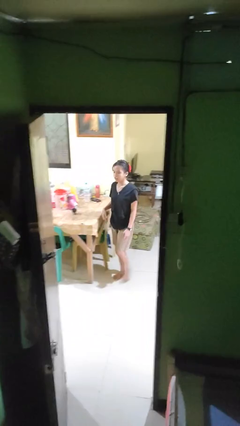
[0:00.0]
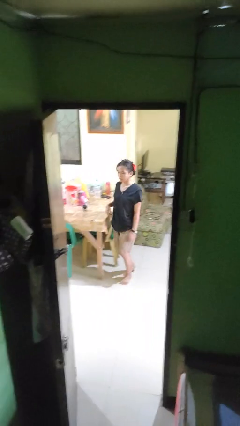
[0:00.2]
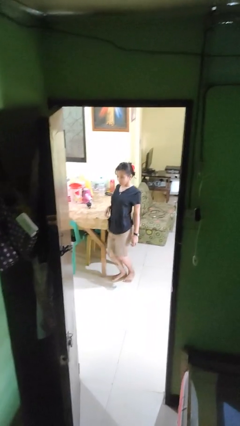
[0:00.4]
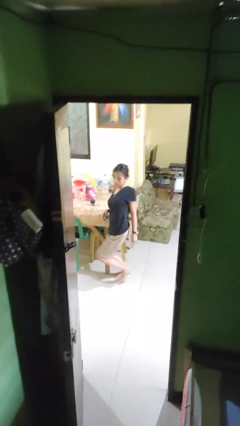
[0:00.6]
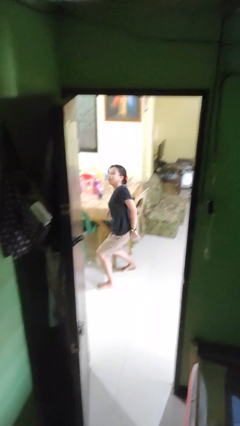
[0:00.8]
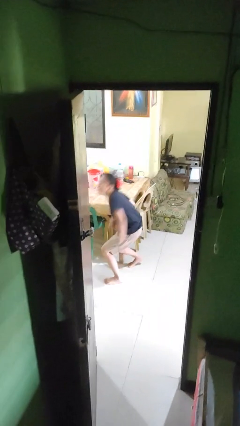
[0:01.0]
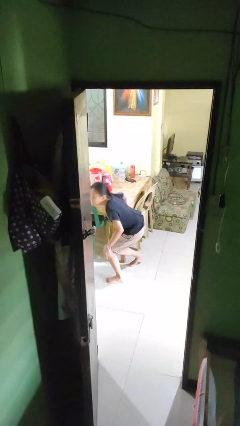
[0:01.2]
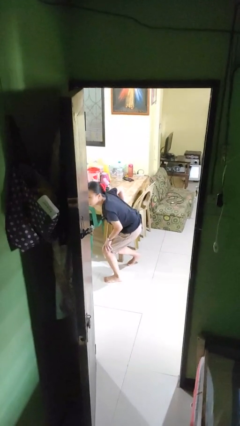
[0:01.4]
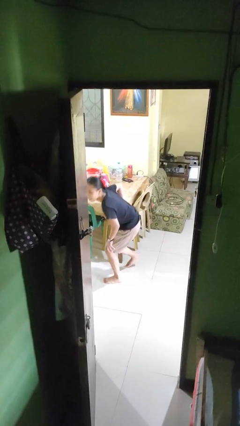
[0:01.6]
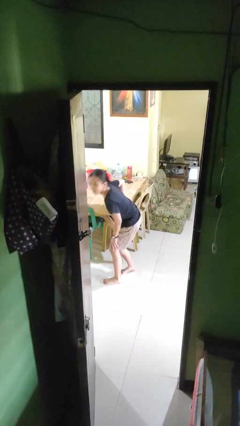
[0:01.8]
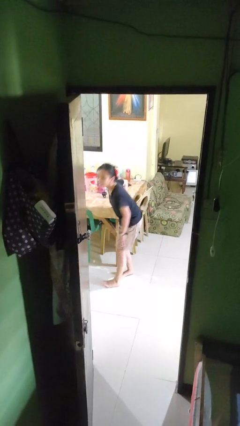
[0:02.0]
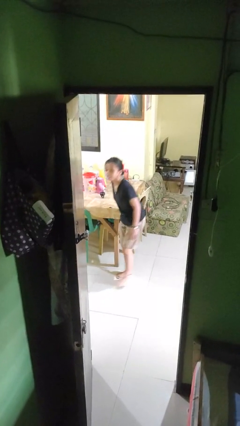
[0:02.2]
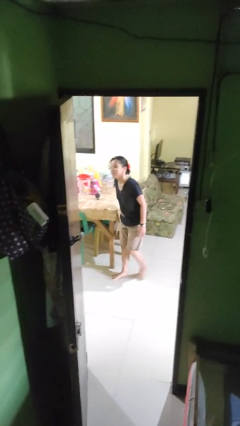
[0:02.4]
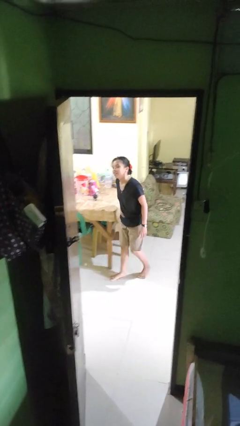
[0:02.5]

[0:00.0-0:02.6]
person bumps into table

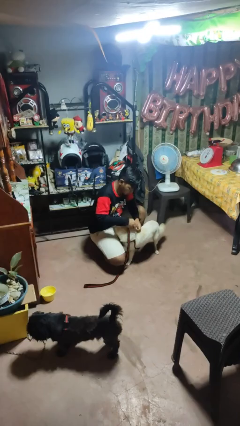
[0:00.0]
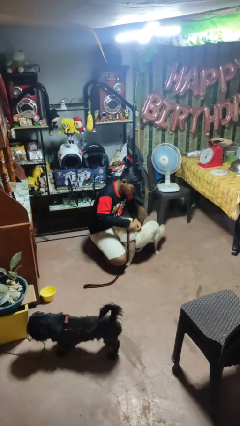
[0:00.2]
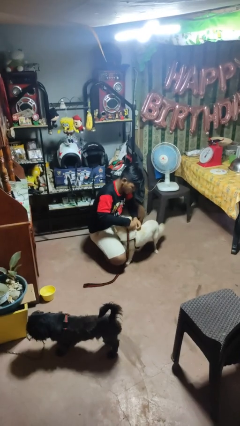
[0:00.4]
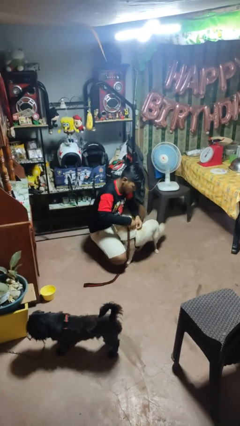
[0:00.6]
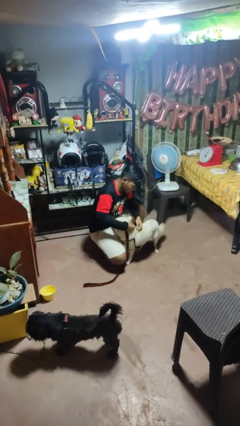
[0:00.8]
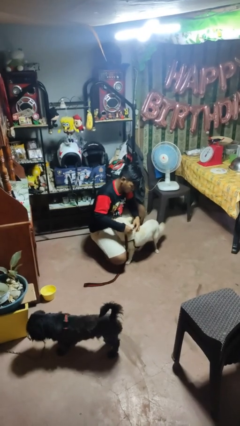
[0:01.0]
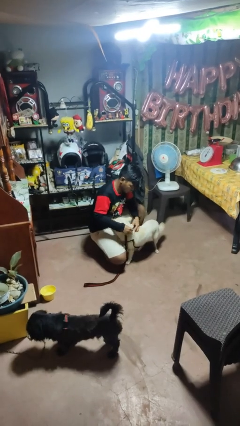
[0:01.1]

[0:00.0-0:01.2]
person attaches leash to dog

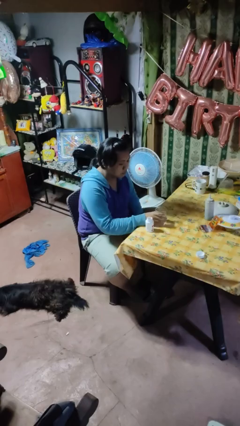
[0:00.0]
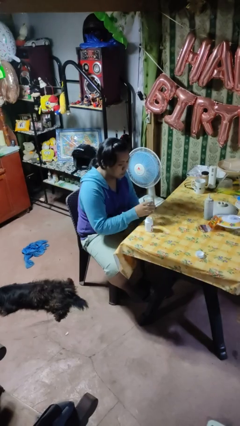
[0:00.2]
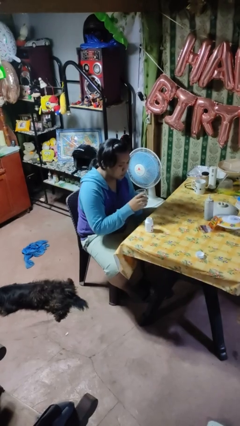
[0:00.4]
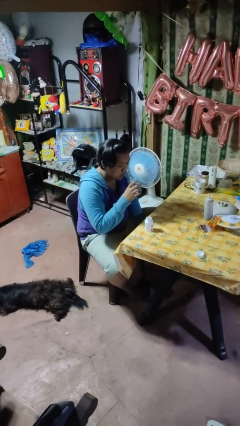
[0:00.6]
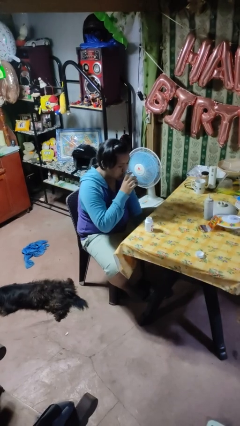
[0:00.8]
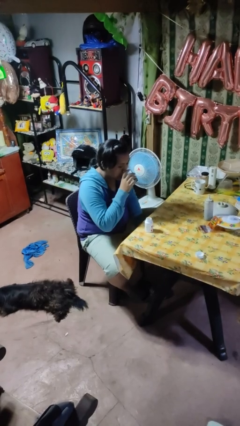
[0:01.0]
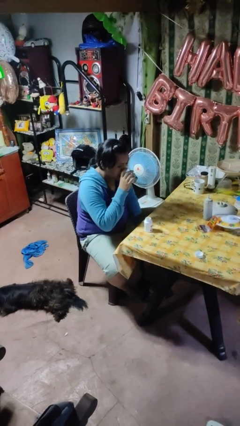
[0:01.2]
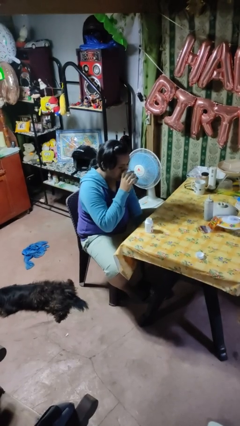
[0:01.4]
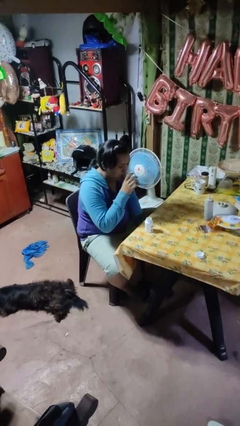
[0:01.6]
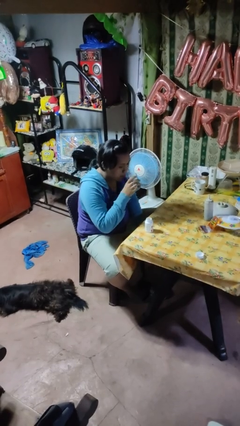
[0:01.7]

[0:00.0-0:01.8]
person drinks from cup

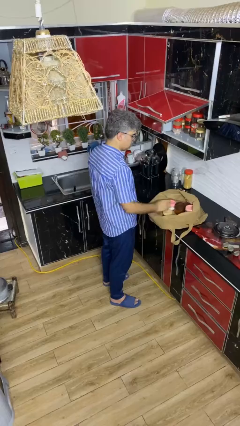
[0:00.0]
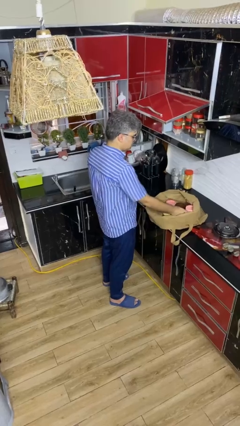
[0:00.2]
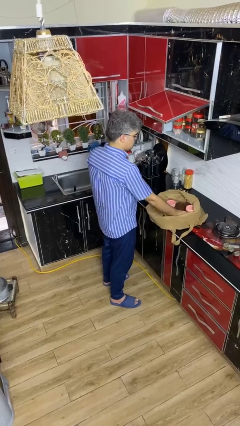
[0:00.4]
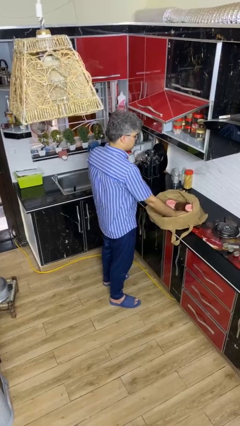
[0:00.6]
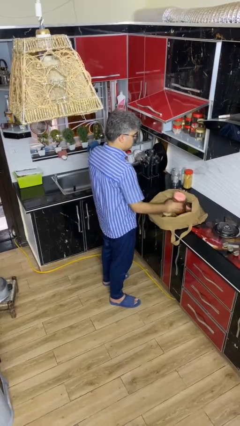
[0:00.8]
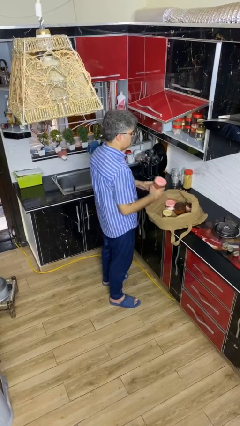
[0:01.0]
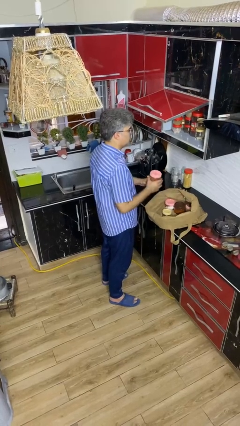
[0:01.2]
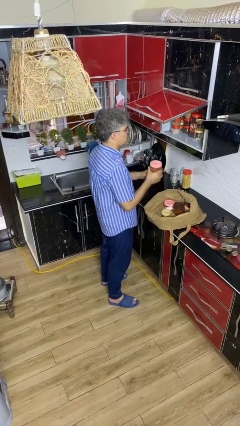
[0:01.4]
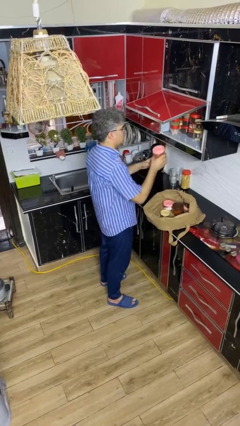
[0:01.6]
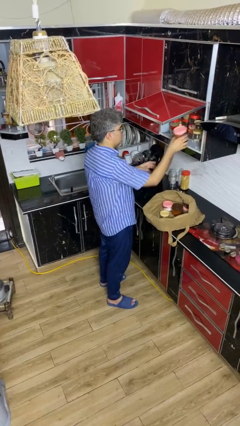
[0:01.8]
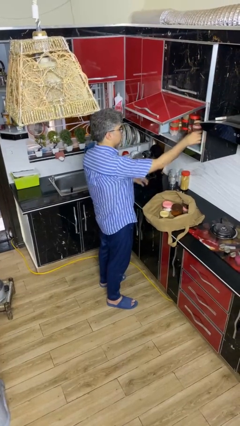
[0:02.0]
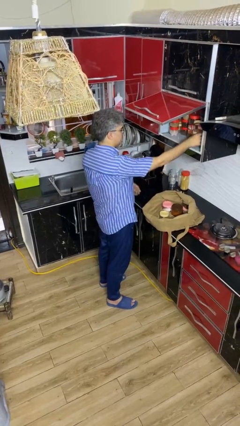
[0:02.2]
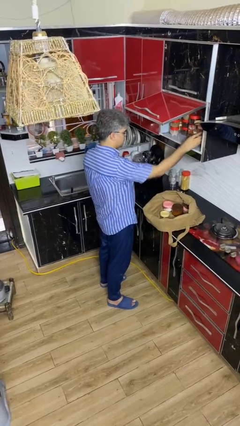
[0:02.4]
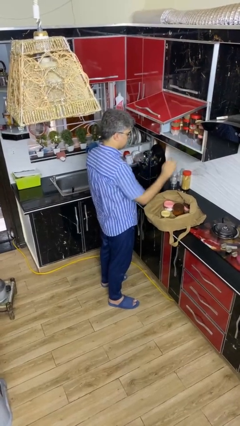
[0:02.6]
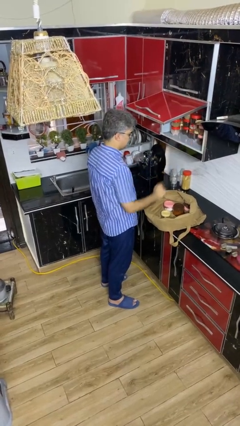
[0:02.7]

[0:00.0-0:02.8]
person loads groceries into cabinet

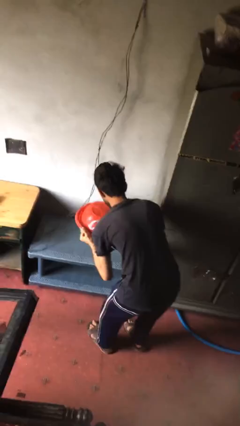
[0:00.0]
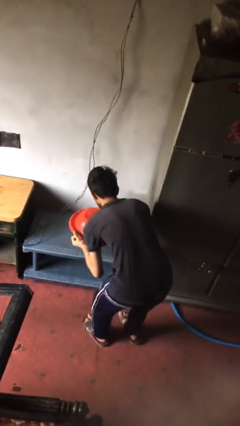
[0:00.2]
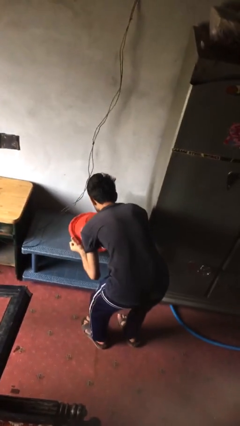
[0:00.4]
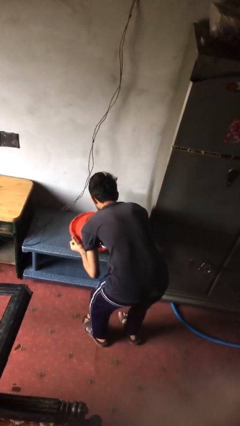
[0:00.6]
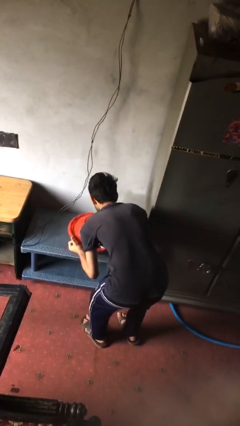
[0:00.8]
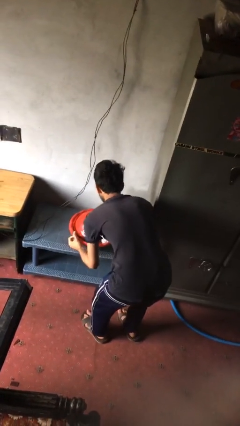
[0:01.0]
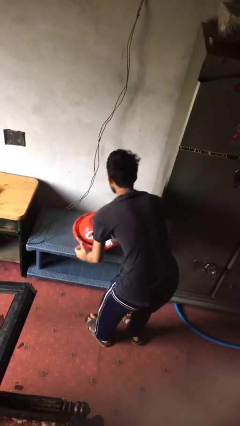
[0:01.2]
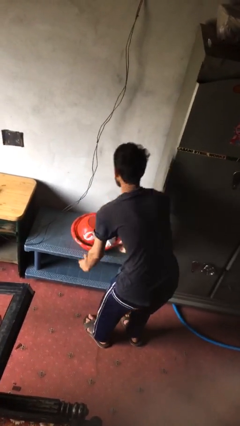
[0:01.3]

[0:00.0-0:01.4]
person puts down object on table

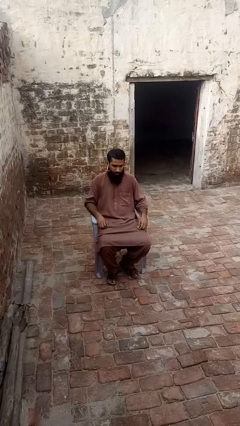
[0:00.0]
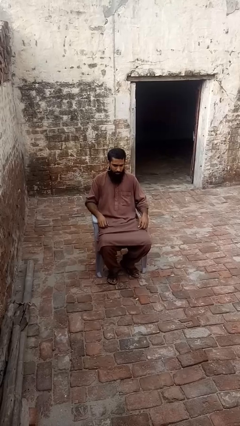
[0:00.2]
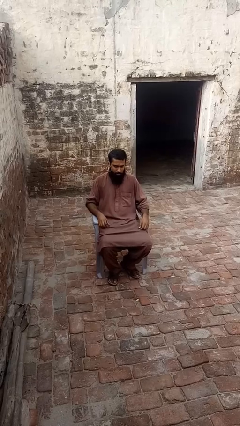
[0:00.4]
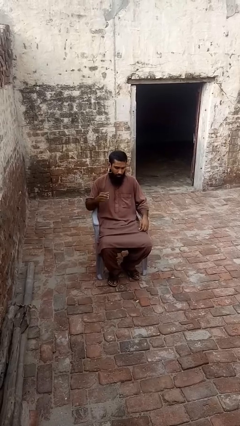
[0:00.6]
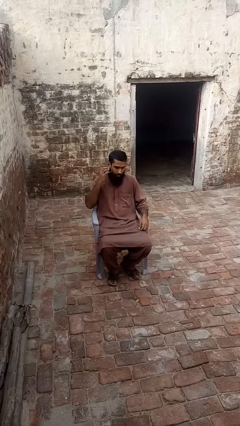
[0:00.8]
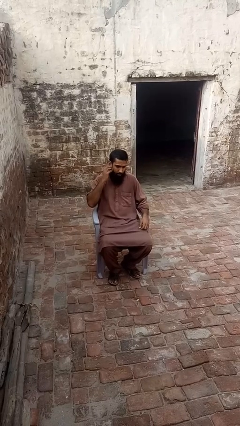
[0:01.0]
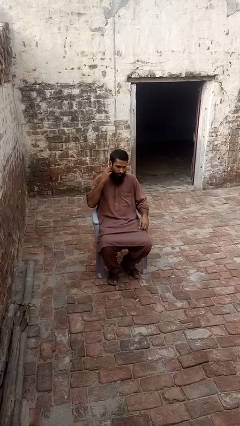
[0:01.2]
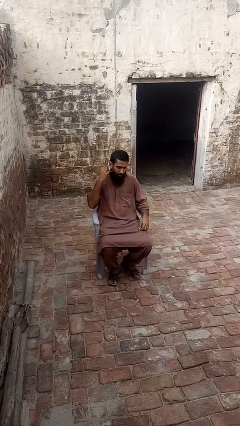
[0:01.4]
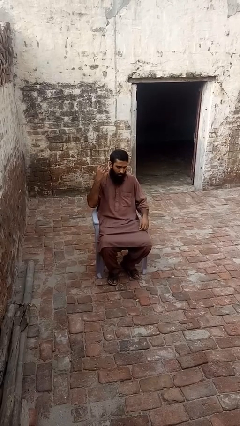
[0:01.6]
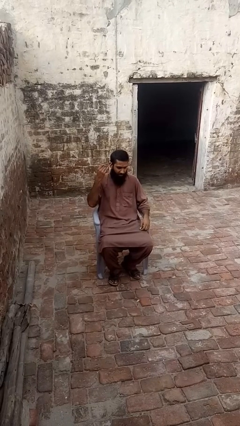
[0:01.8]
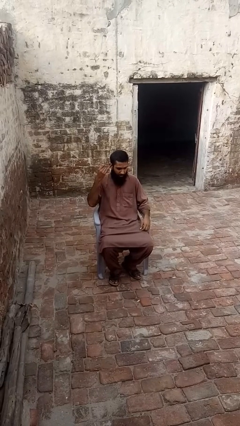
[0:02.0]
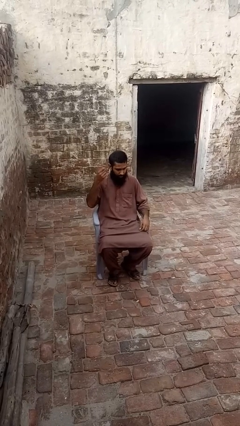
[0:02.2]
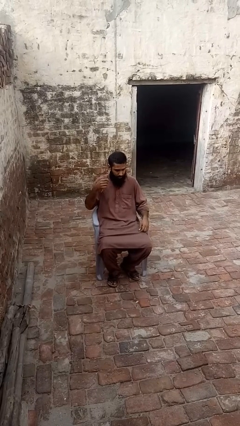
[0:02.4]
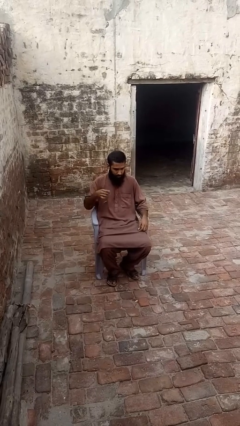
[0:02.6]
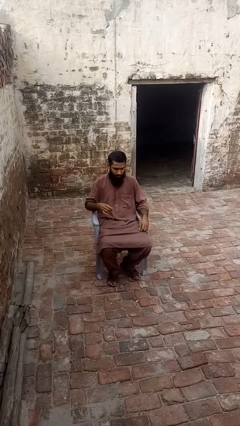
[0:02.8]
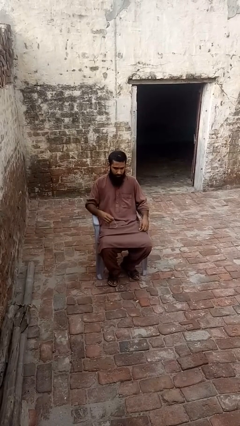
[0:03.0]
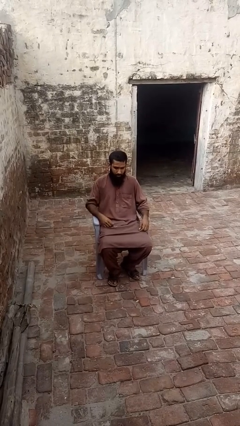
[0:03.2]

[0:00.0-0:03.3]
person takes off earrings

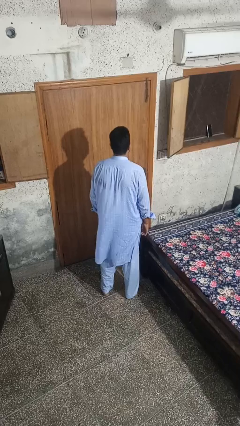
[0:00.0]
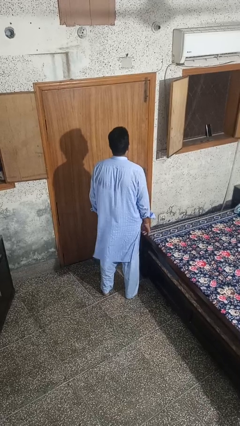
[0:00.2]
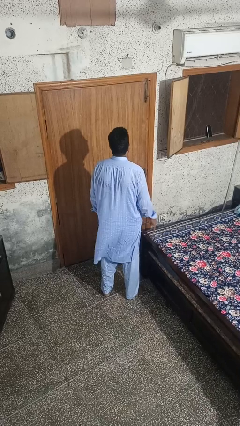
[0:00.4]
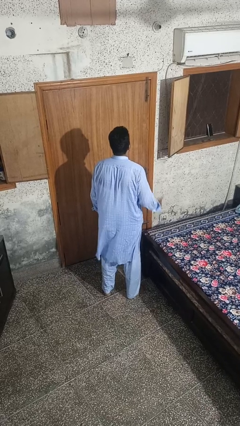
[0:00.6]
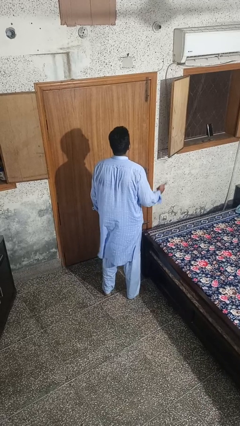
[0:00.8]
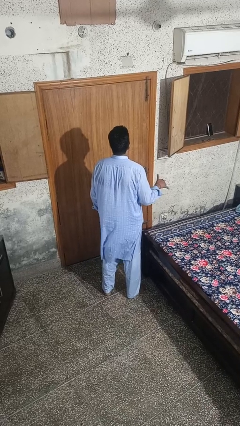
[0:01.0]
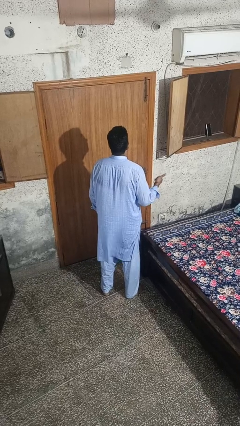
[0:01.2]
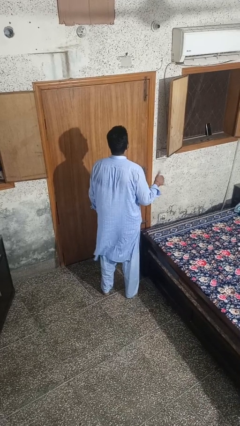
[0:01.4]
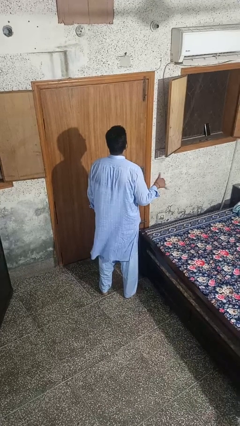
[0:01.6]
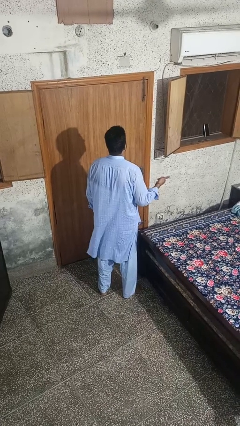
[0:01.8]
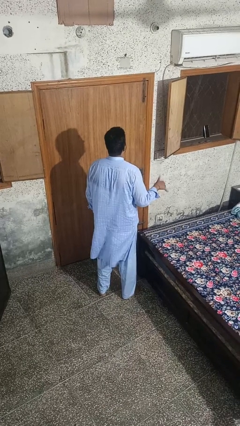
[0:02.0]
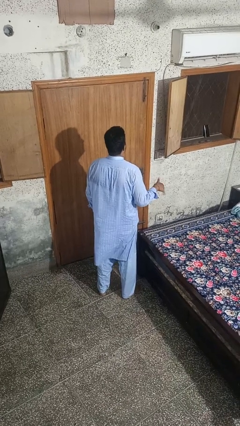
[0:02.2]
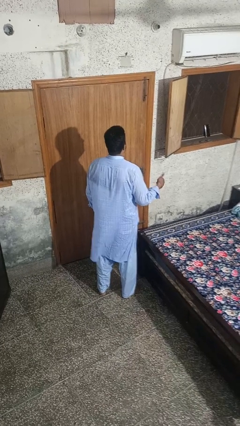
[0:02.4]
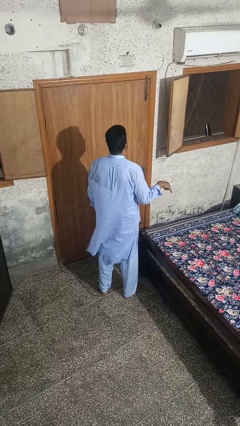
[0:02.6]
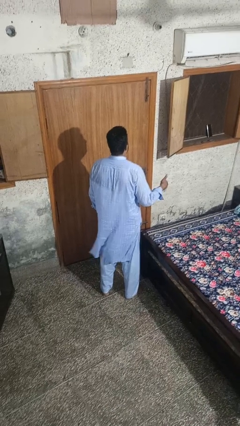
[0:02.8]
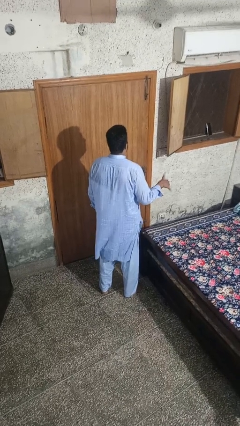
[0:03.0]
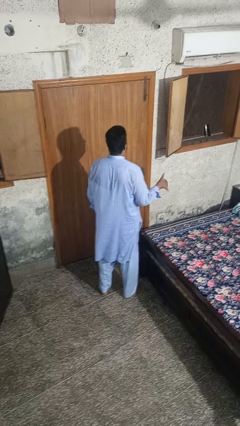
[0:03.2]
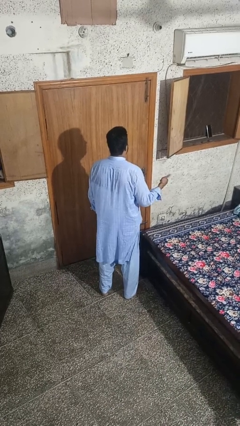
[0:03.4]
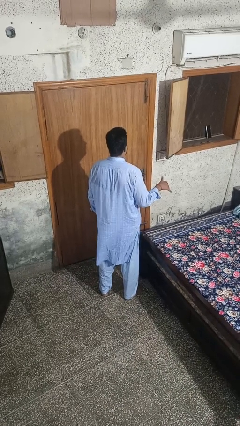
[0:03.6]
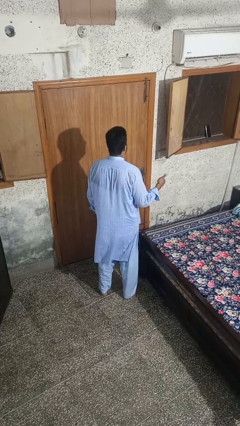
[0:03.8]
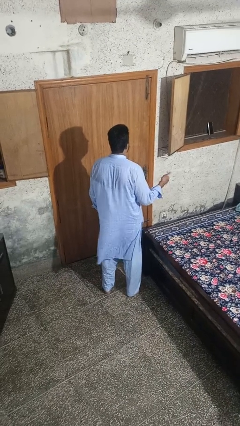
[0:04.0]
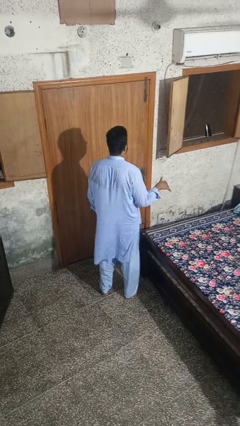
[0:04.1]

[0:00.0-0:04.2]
person gestures hang loose
